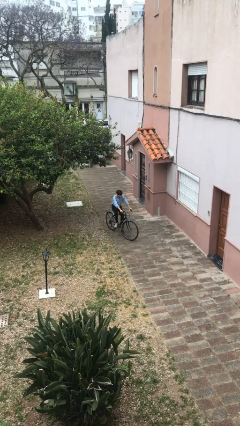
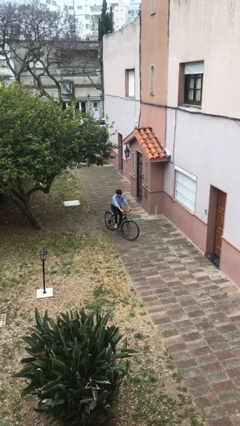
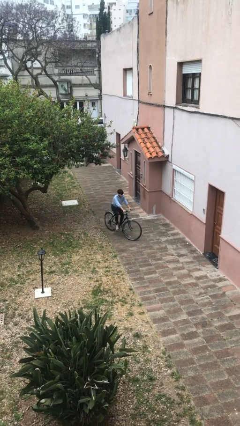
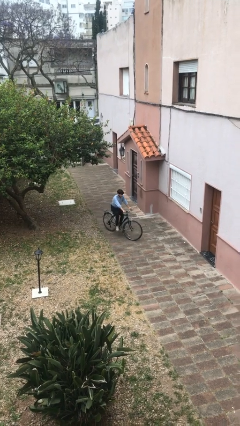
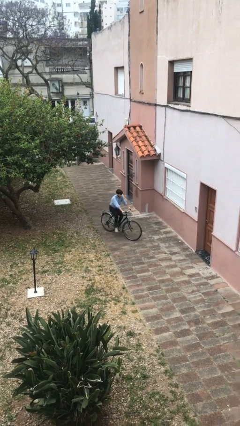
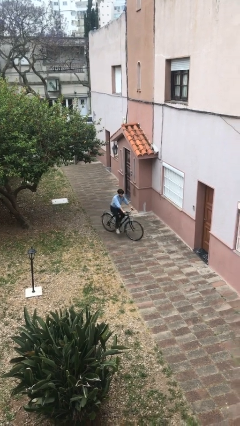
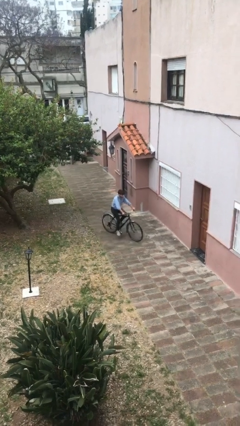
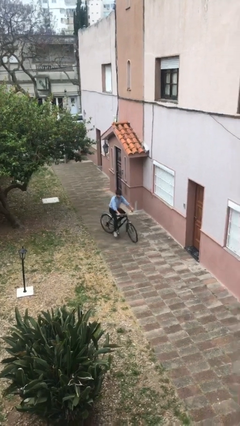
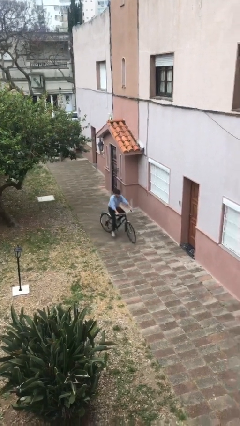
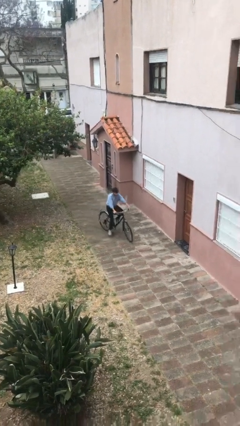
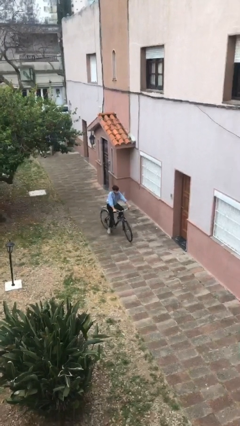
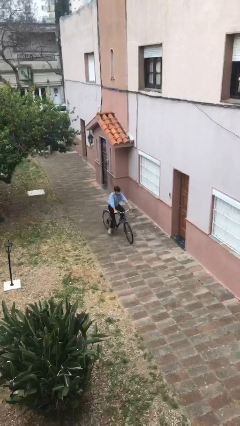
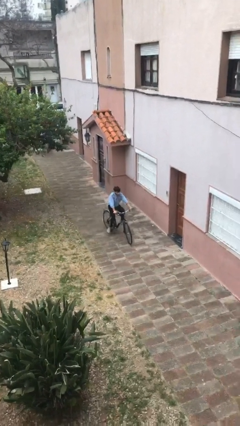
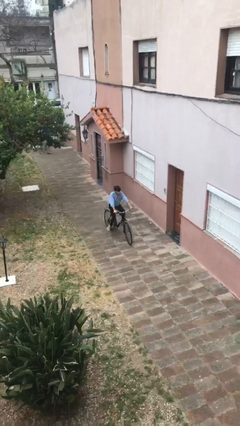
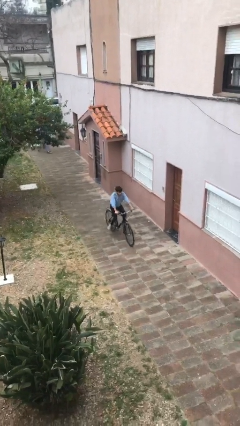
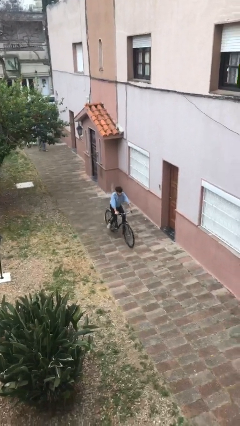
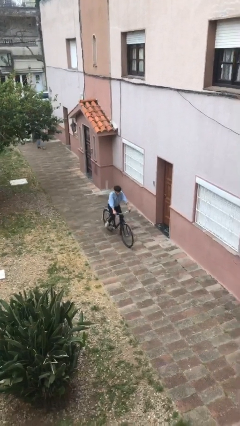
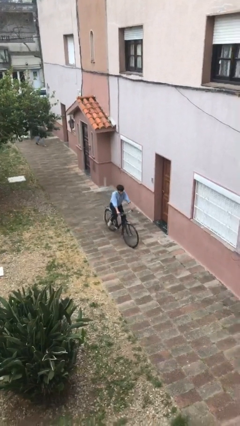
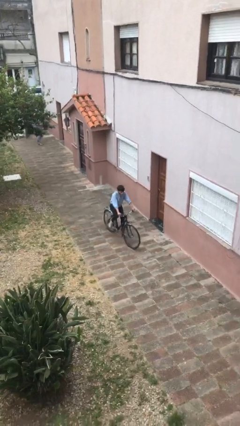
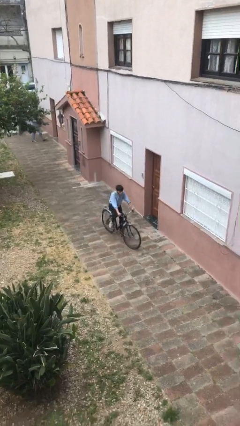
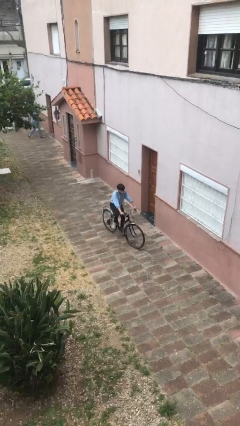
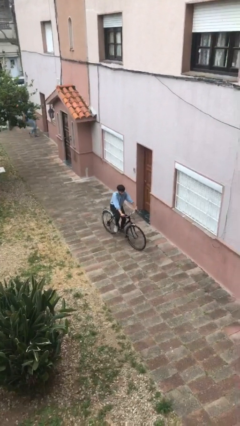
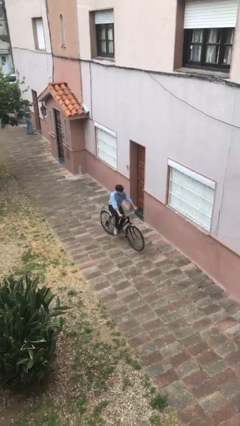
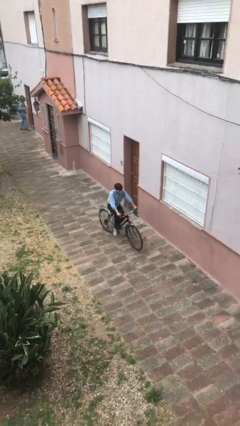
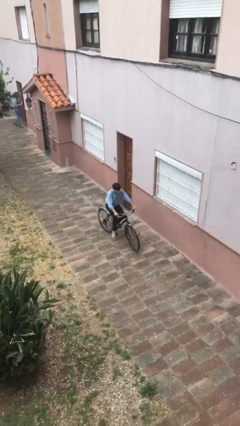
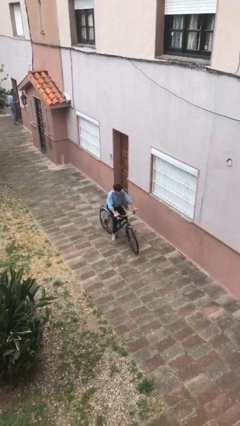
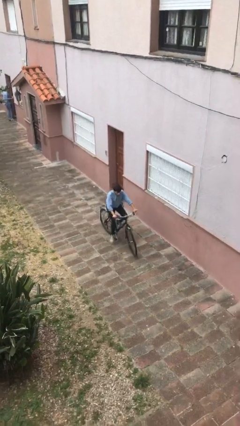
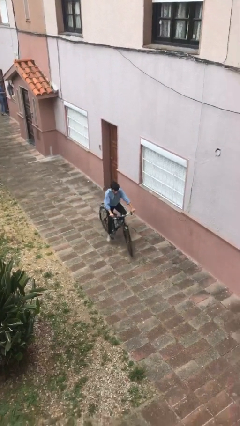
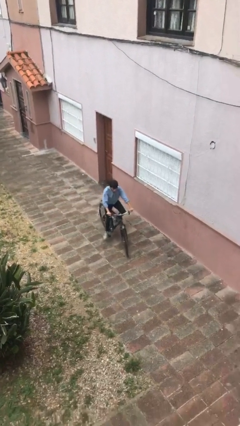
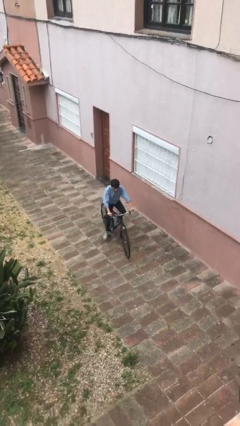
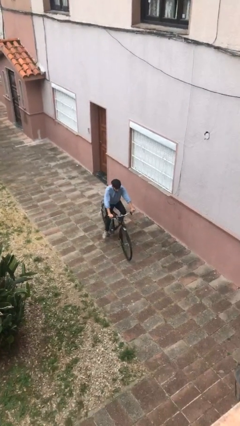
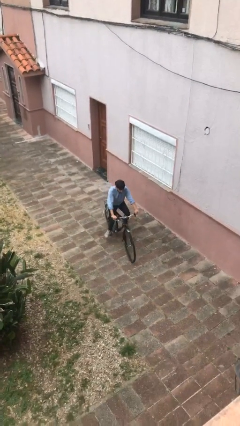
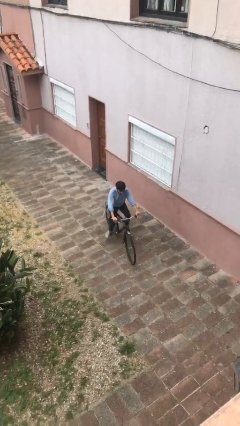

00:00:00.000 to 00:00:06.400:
person rides bicycle

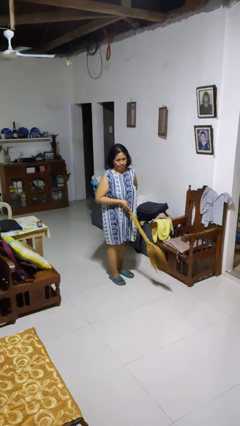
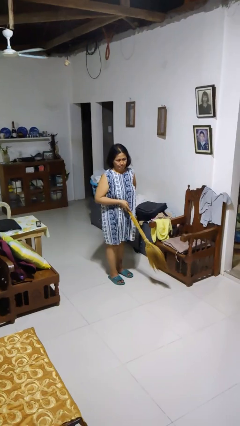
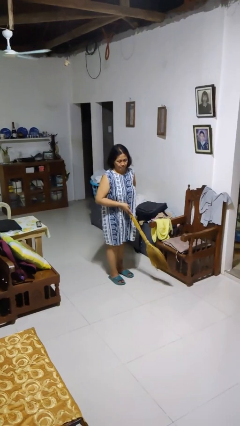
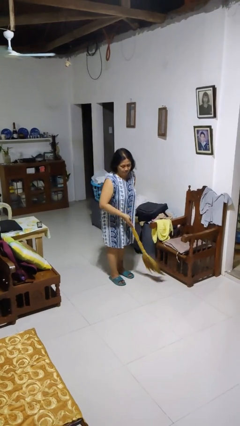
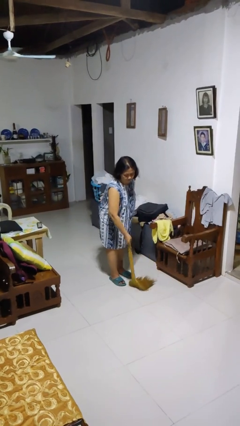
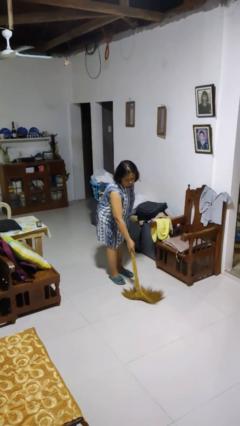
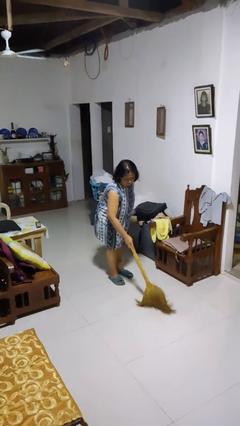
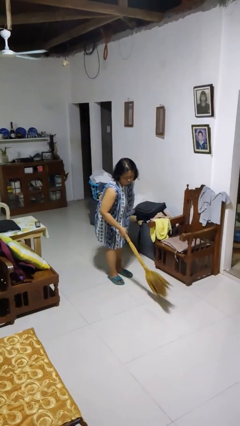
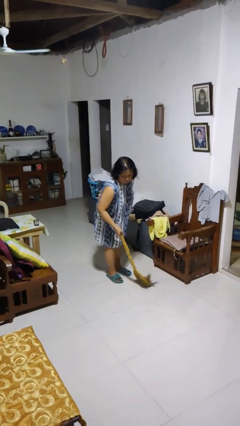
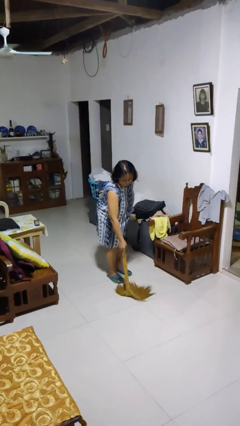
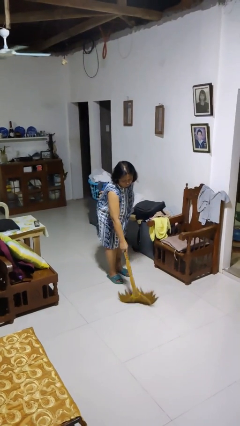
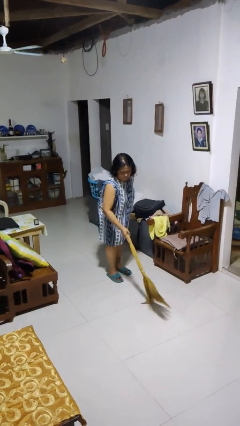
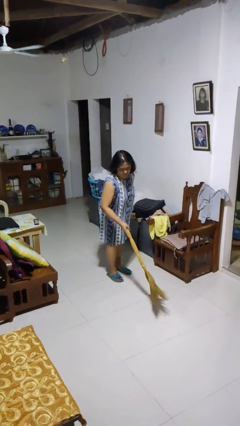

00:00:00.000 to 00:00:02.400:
person sweeps floor

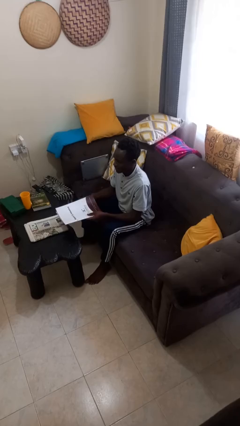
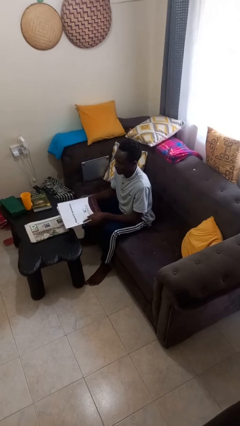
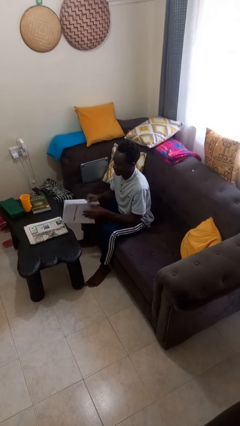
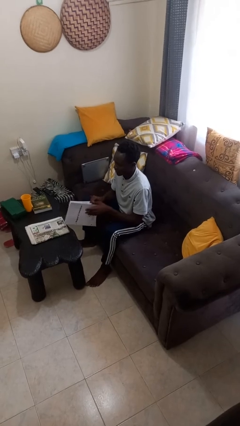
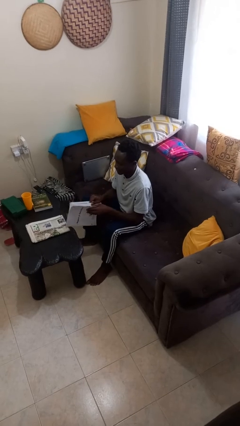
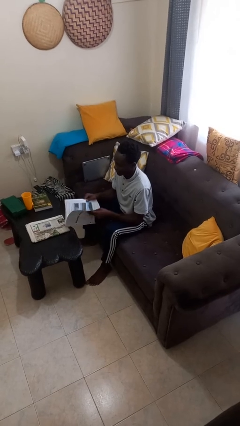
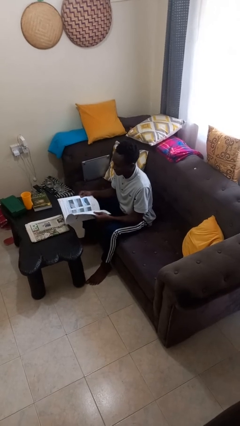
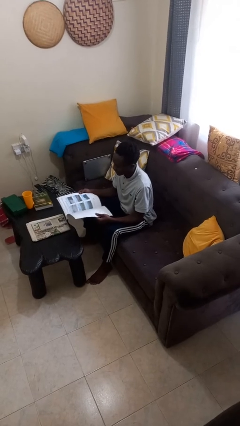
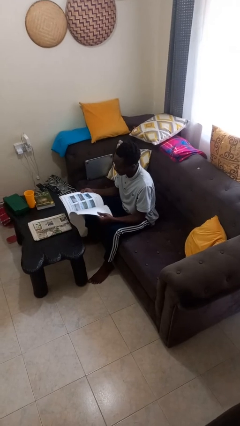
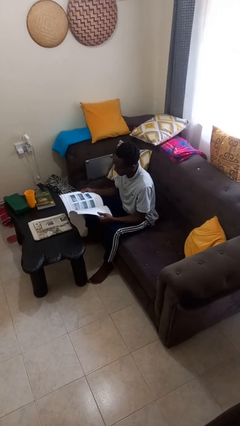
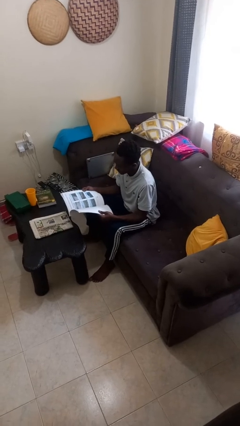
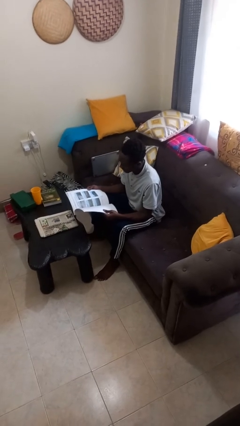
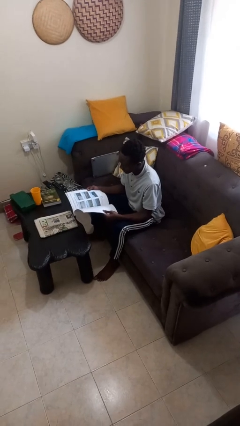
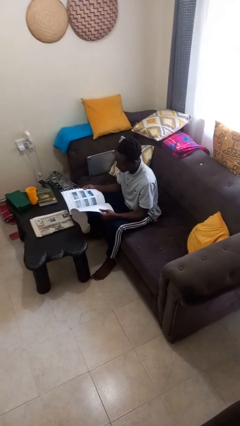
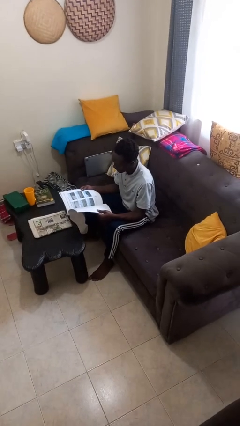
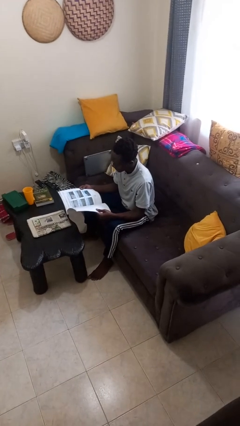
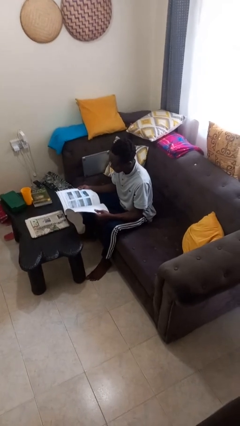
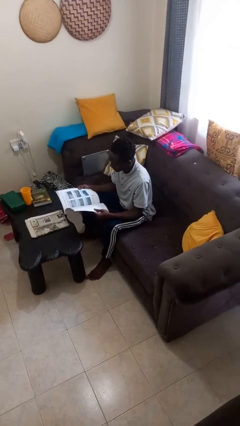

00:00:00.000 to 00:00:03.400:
person reads magazine

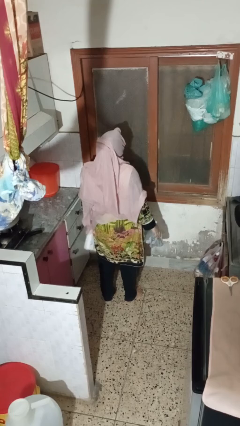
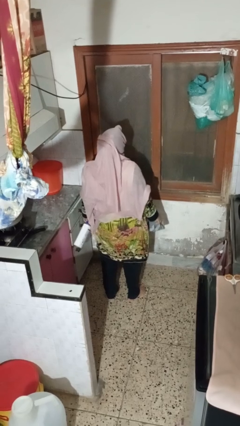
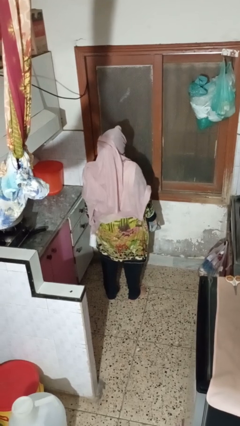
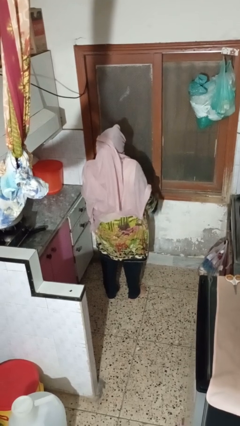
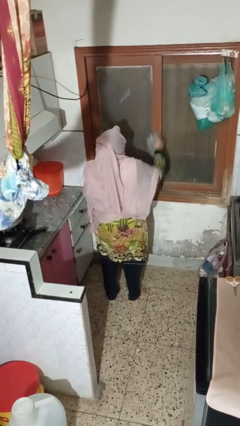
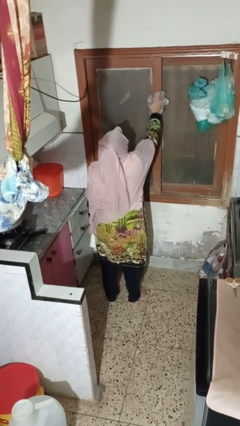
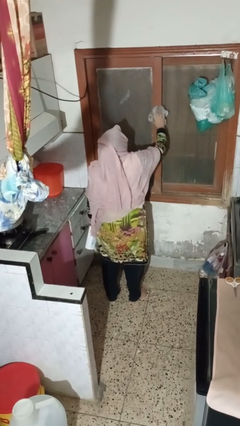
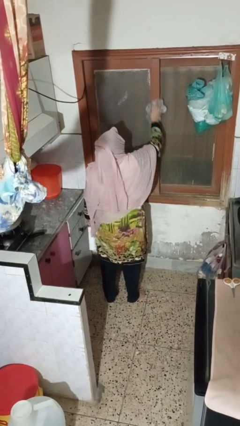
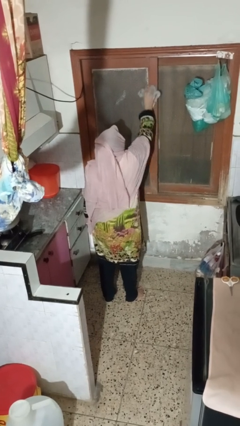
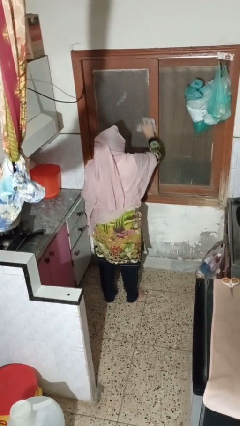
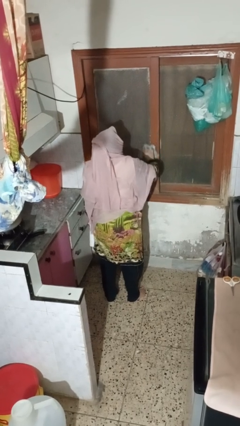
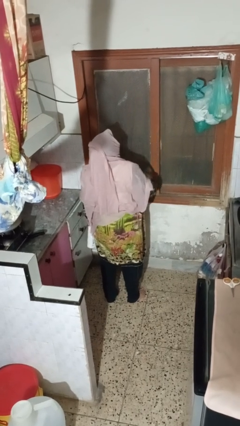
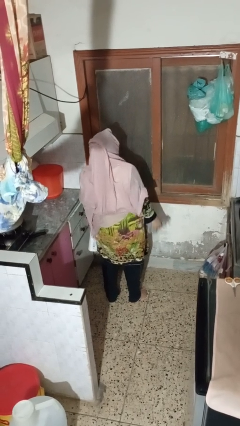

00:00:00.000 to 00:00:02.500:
person washes window

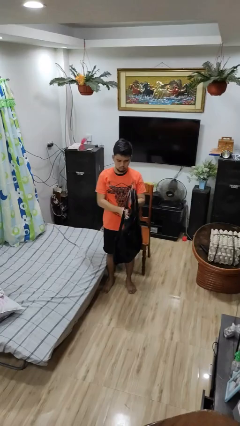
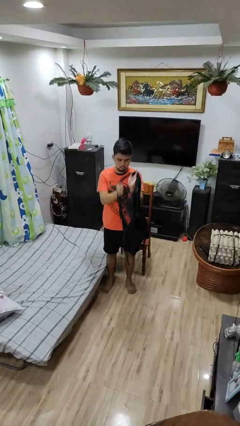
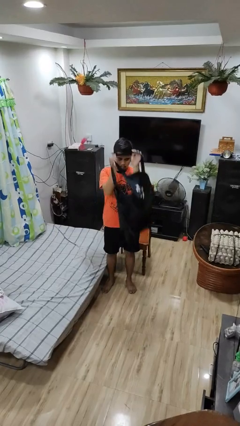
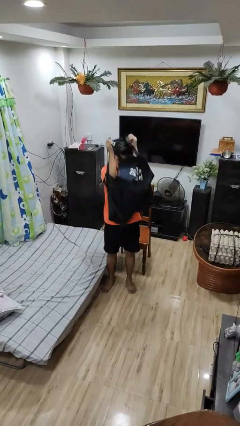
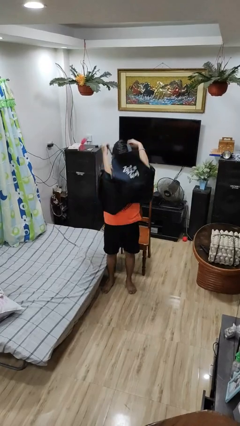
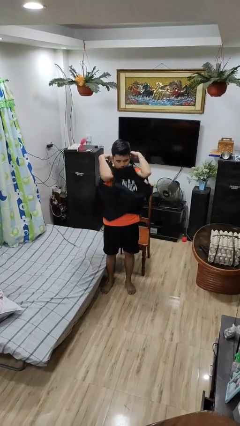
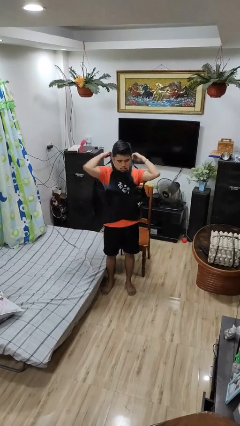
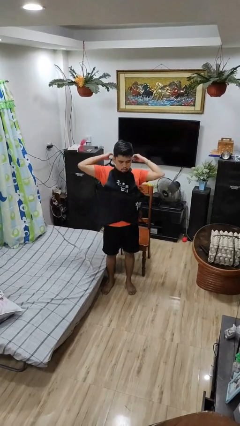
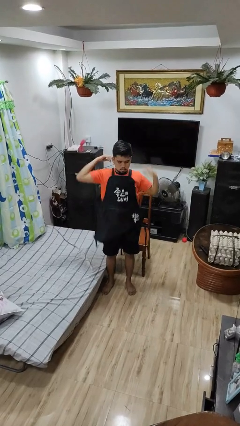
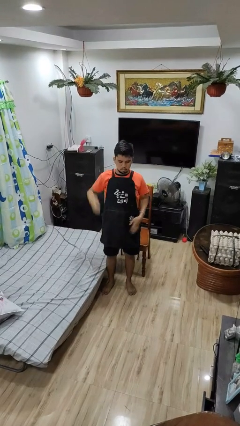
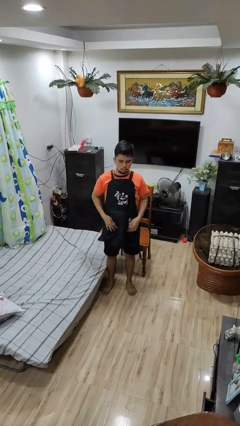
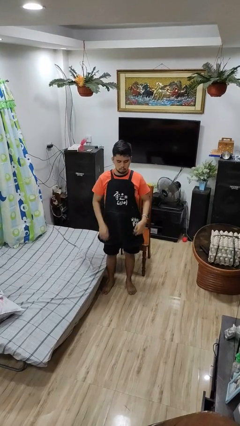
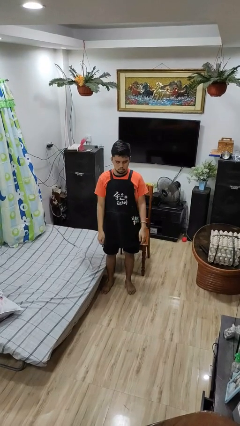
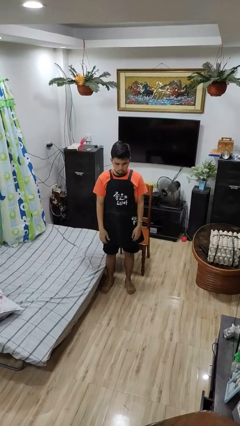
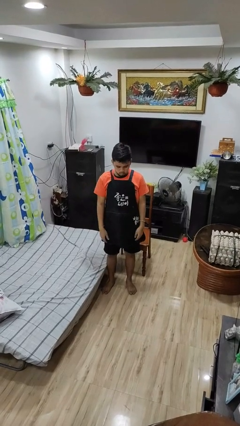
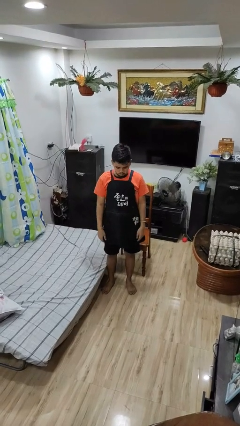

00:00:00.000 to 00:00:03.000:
person puts on apron
